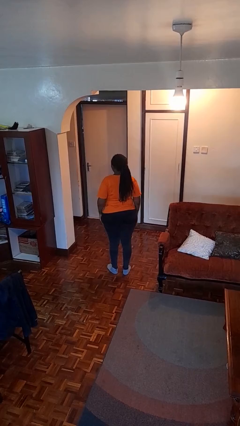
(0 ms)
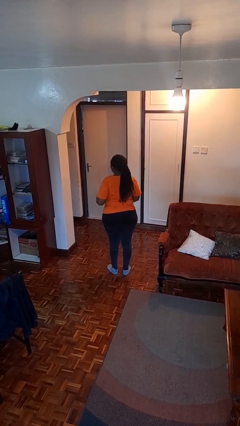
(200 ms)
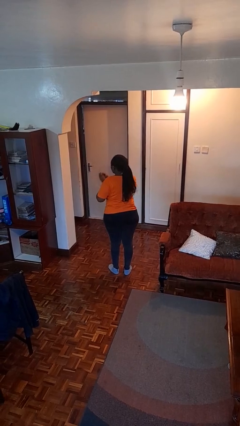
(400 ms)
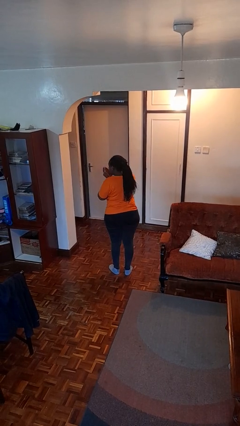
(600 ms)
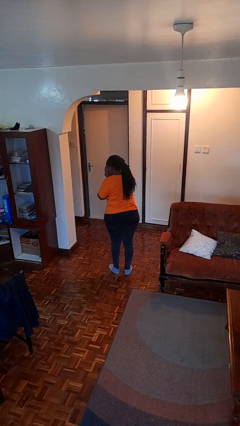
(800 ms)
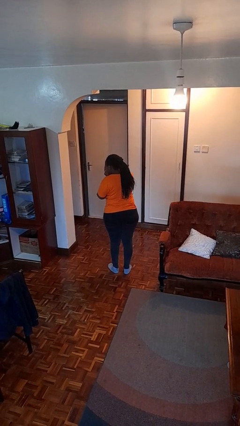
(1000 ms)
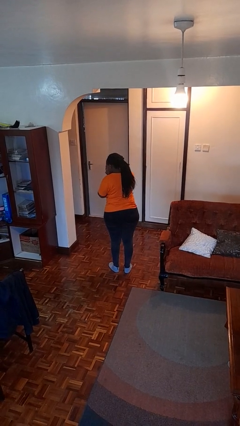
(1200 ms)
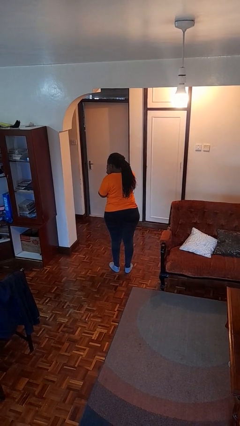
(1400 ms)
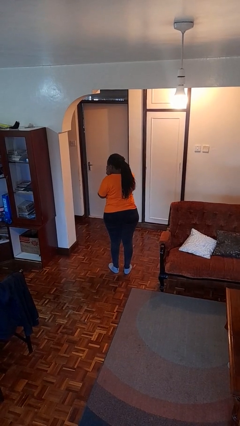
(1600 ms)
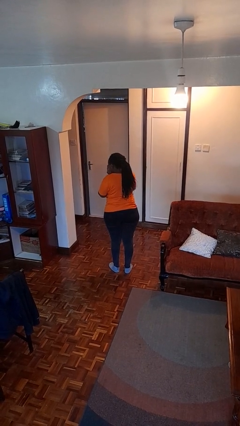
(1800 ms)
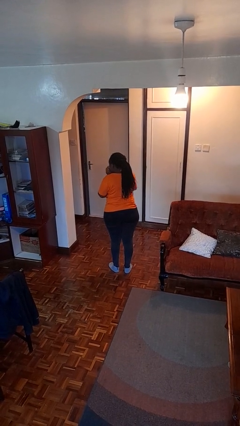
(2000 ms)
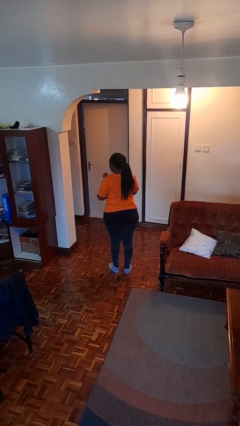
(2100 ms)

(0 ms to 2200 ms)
person sneezes into hand

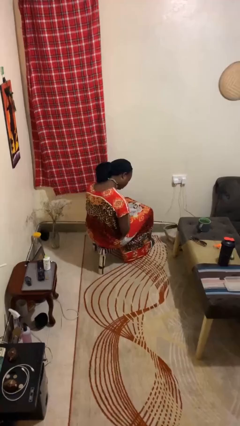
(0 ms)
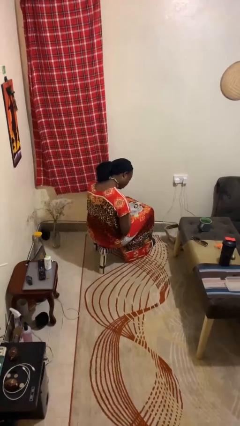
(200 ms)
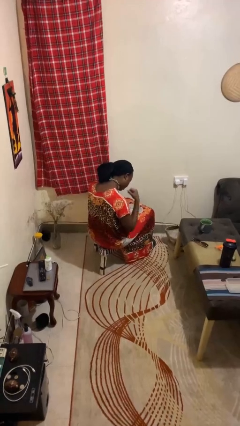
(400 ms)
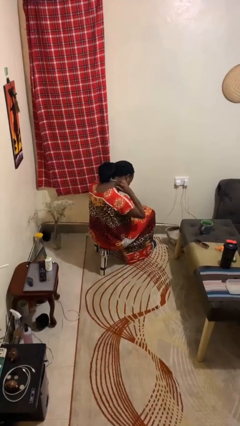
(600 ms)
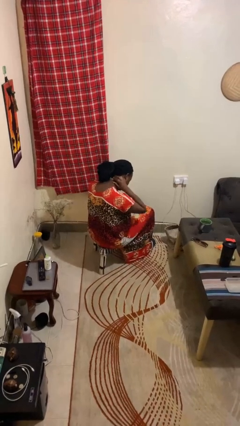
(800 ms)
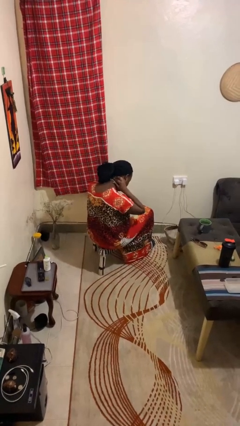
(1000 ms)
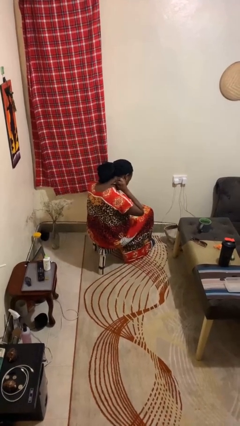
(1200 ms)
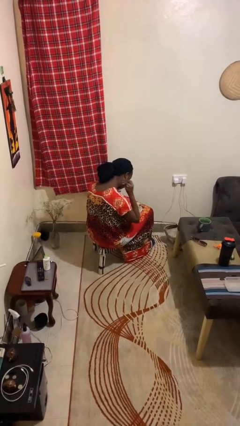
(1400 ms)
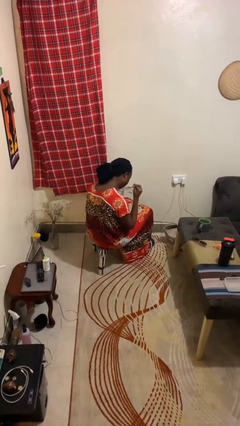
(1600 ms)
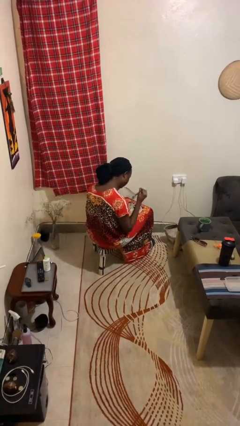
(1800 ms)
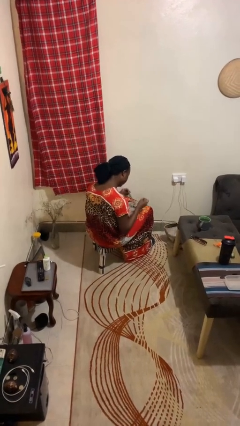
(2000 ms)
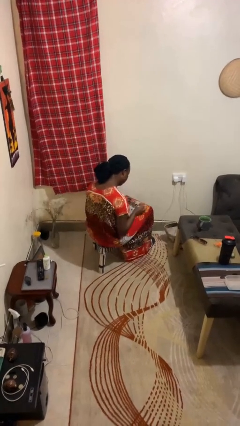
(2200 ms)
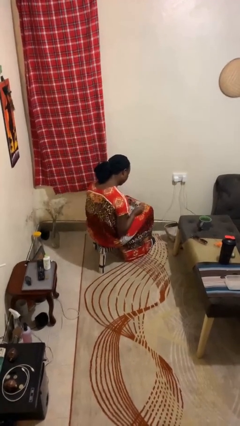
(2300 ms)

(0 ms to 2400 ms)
person takes off necklace

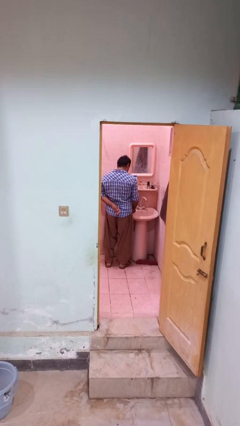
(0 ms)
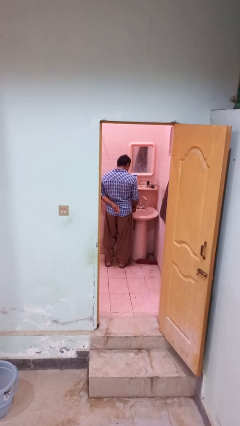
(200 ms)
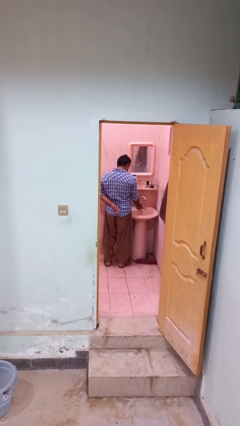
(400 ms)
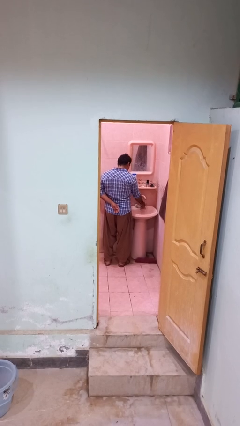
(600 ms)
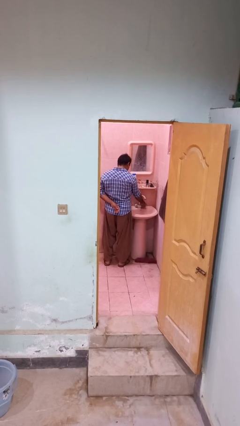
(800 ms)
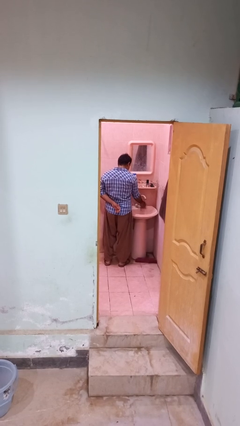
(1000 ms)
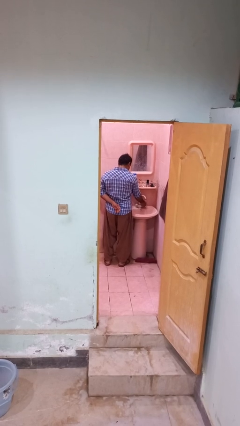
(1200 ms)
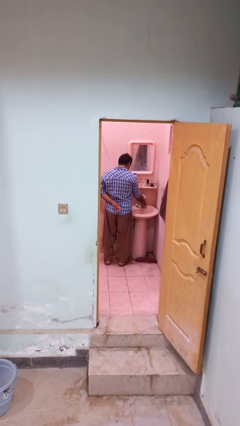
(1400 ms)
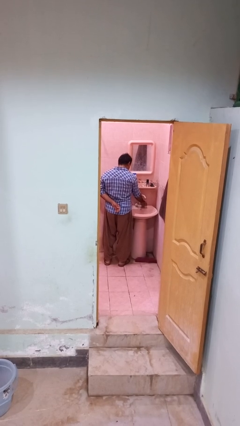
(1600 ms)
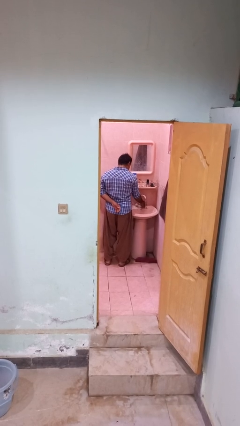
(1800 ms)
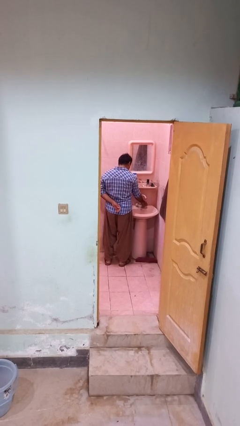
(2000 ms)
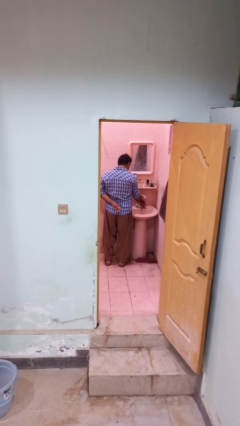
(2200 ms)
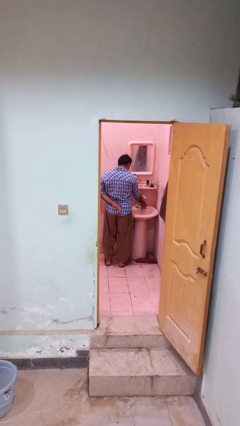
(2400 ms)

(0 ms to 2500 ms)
person turns off faucet

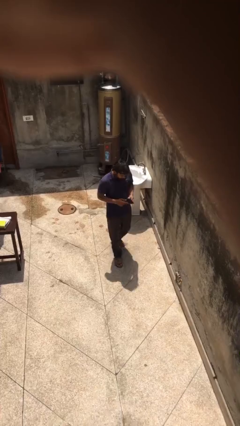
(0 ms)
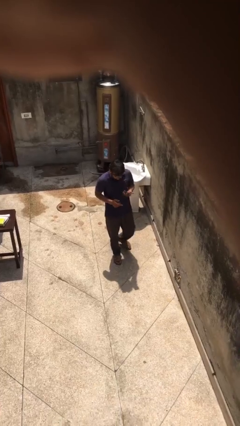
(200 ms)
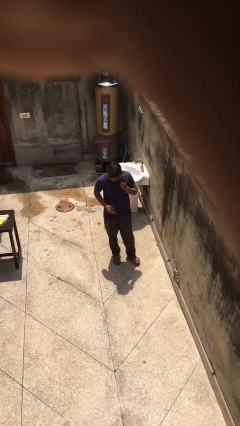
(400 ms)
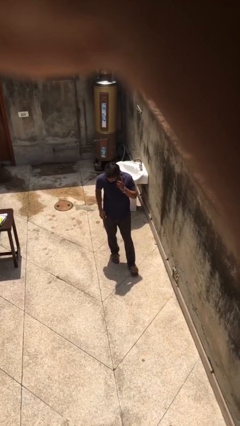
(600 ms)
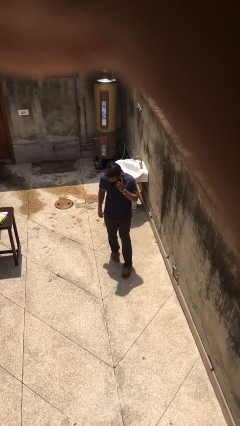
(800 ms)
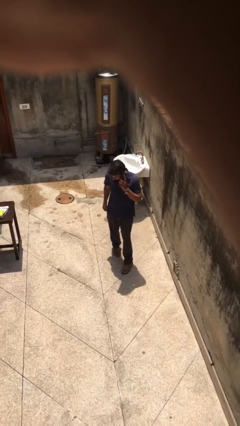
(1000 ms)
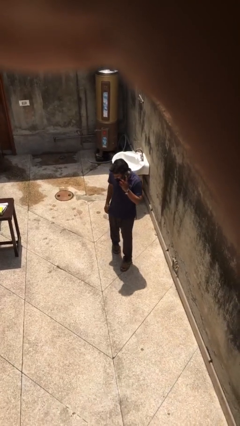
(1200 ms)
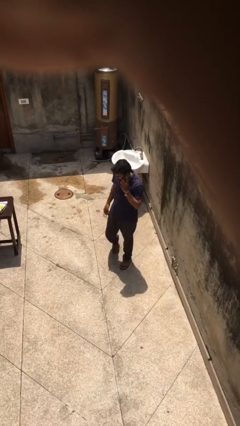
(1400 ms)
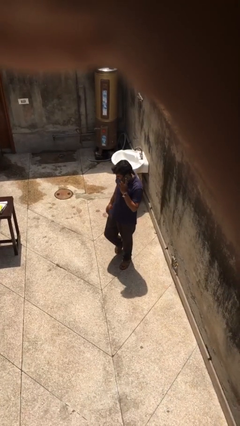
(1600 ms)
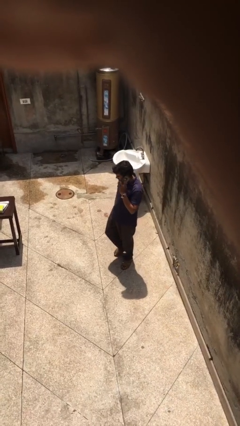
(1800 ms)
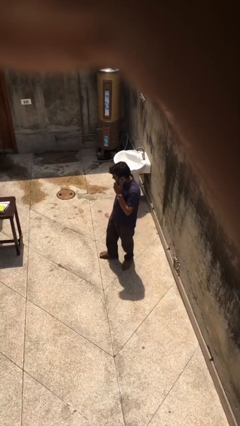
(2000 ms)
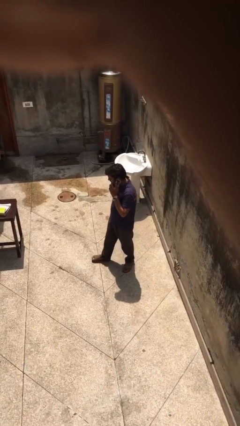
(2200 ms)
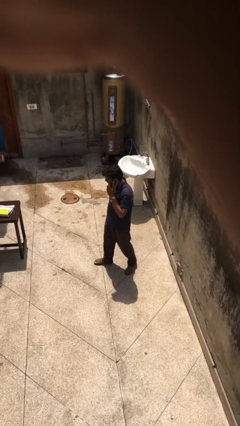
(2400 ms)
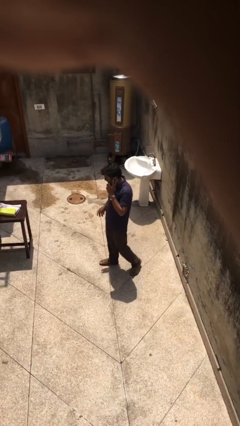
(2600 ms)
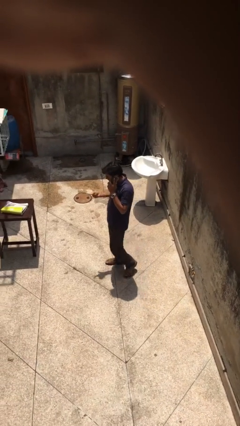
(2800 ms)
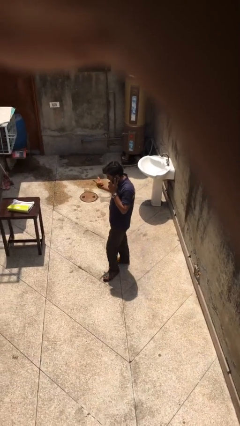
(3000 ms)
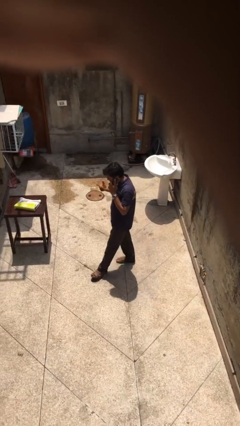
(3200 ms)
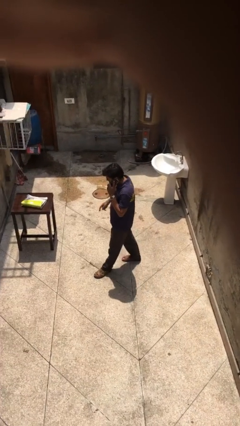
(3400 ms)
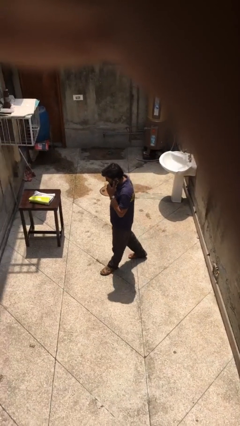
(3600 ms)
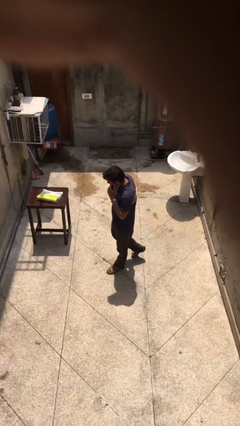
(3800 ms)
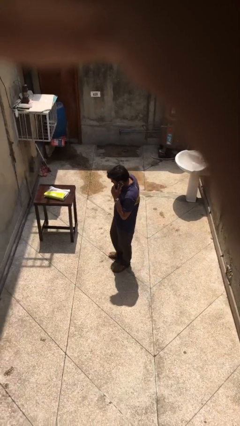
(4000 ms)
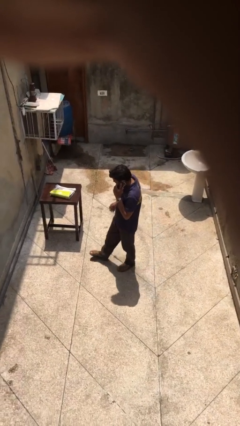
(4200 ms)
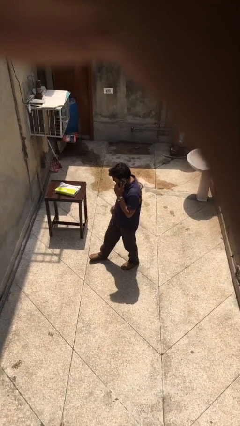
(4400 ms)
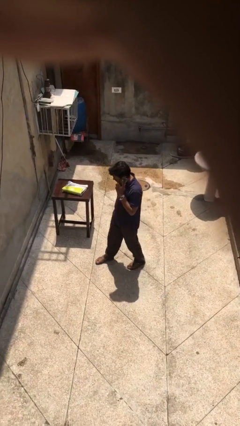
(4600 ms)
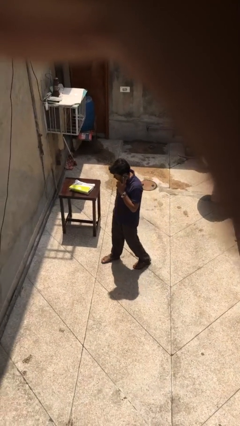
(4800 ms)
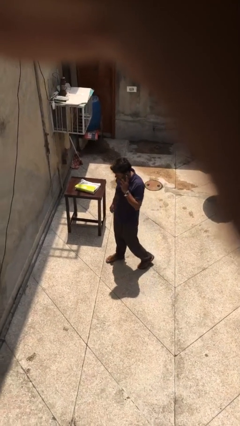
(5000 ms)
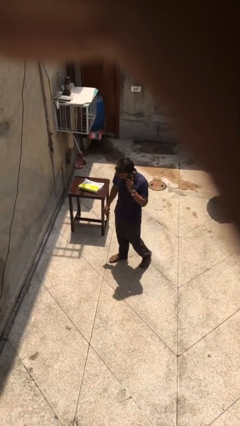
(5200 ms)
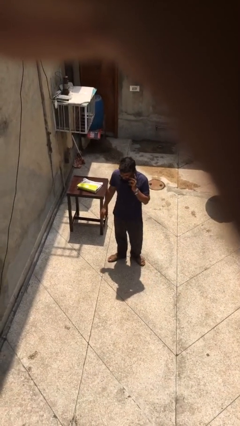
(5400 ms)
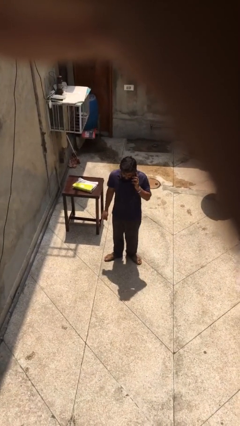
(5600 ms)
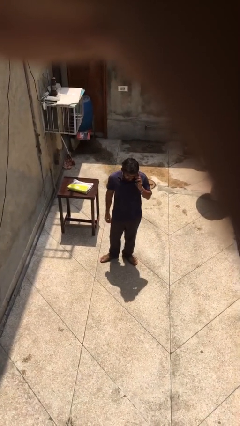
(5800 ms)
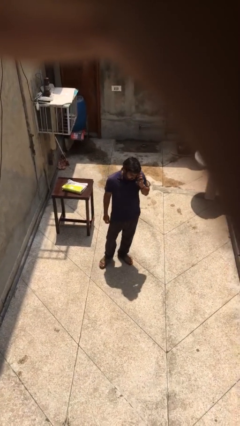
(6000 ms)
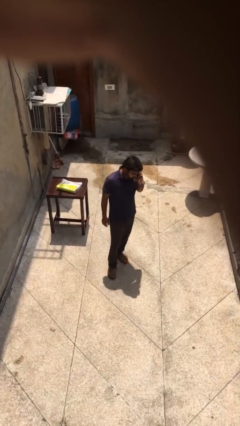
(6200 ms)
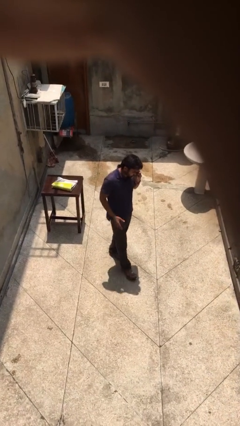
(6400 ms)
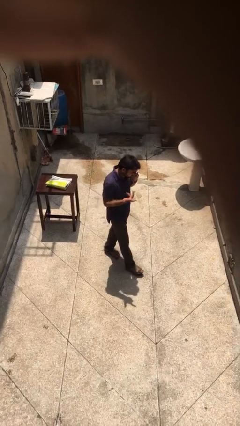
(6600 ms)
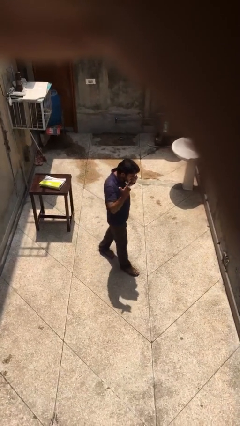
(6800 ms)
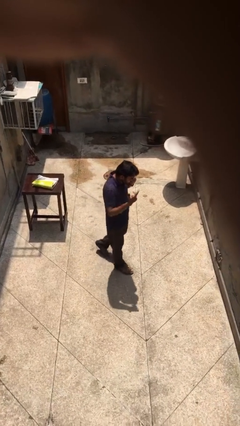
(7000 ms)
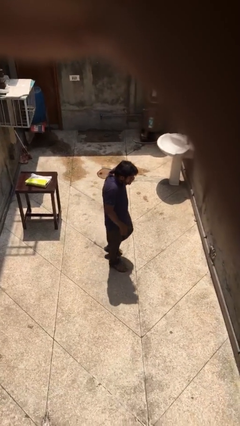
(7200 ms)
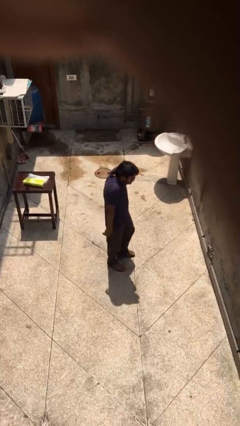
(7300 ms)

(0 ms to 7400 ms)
person talks on phone

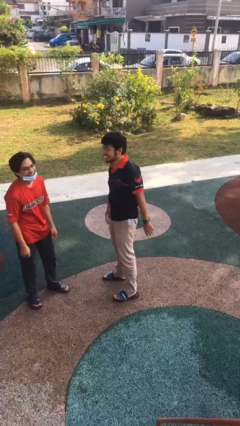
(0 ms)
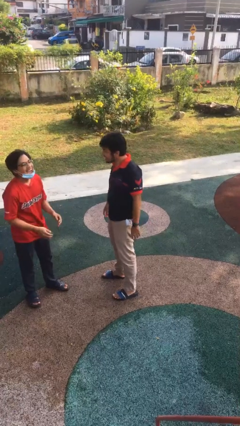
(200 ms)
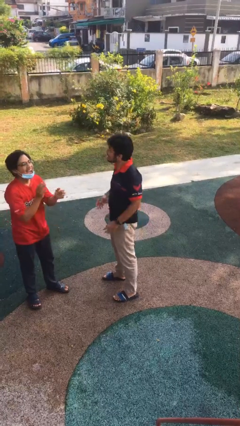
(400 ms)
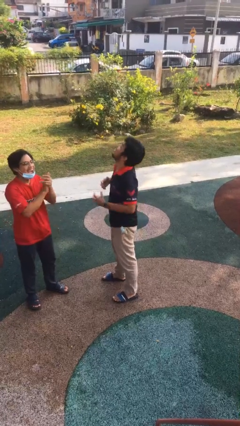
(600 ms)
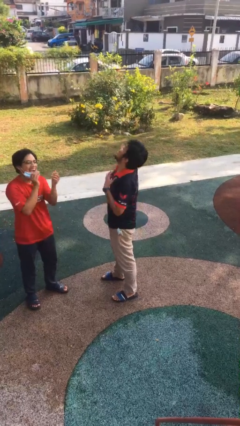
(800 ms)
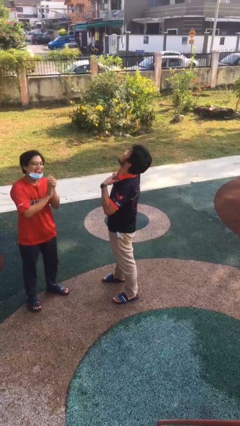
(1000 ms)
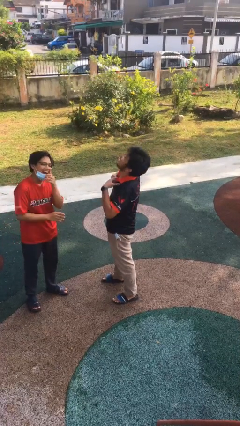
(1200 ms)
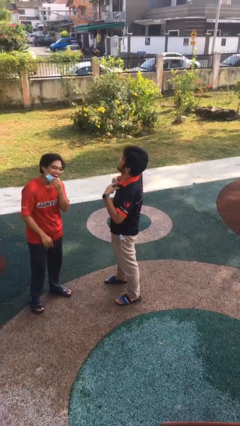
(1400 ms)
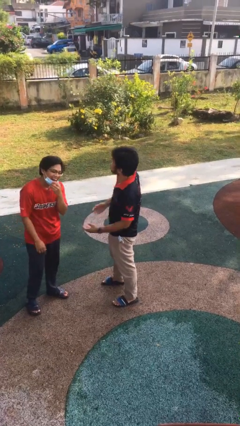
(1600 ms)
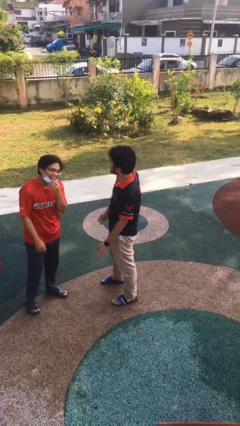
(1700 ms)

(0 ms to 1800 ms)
person laughs with person

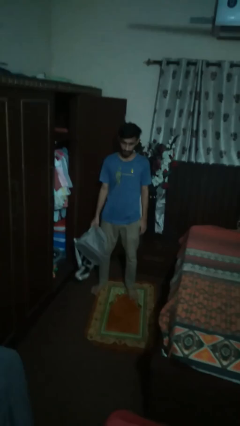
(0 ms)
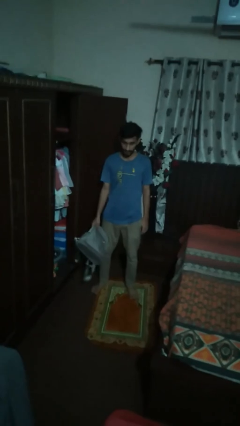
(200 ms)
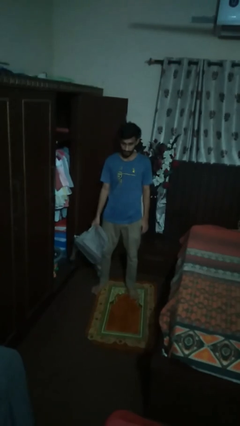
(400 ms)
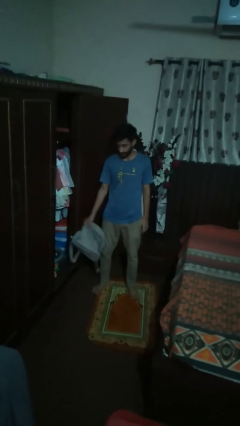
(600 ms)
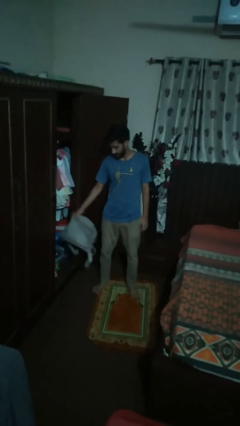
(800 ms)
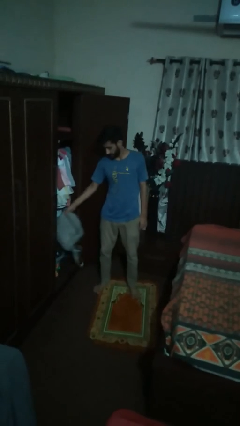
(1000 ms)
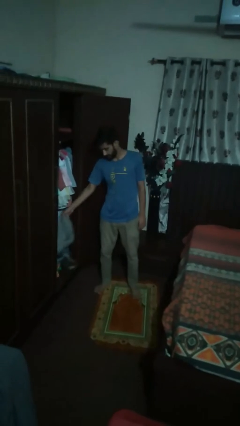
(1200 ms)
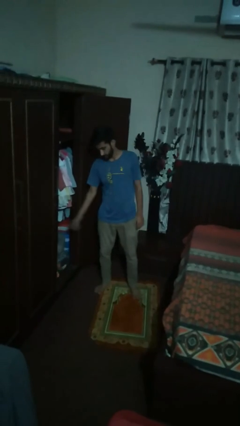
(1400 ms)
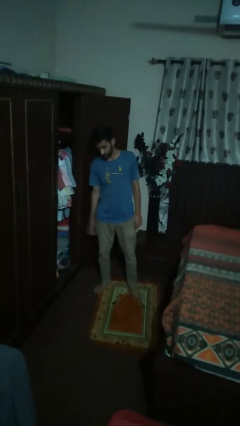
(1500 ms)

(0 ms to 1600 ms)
person puts down object into cabinet
